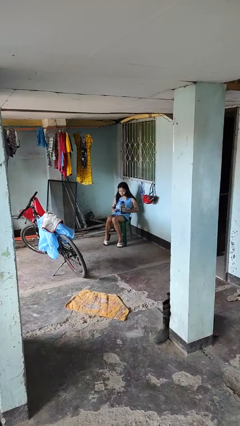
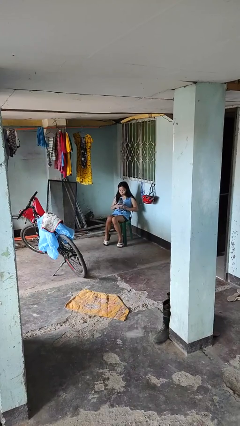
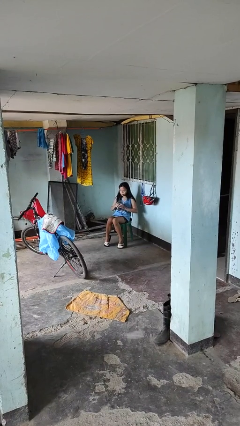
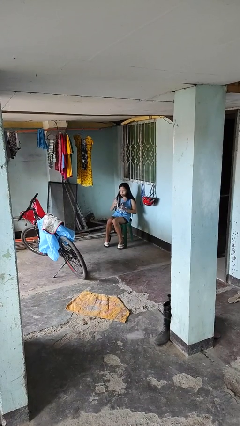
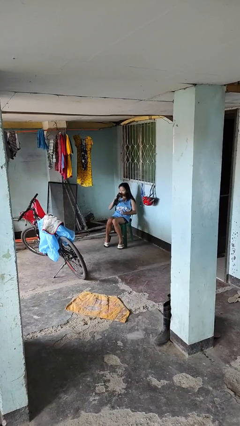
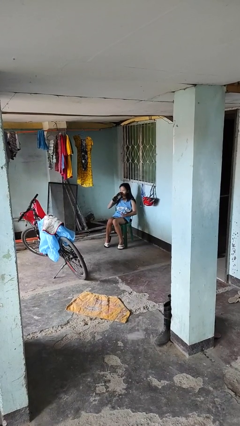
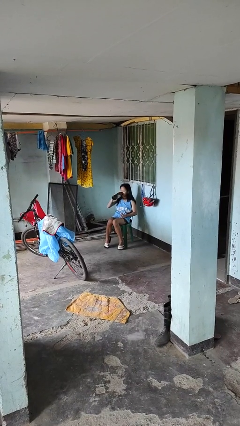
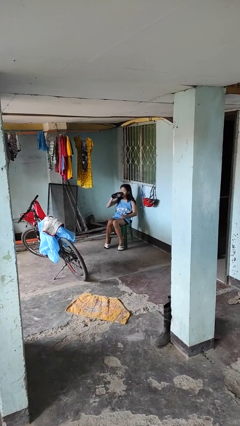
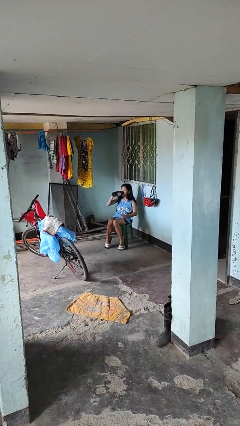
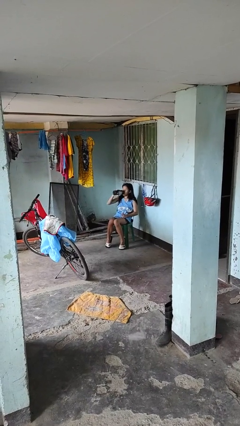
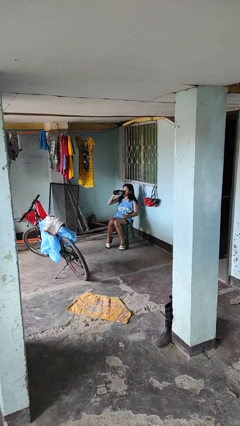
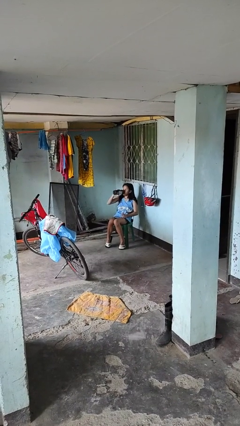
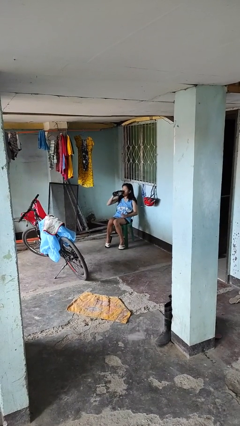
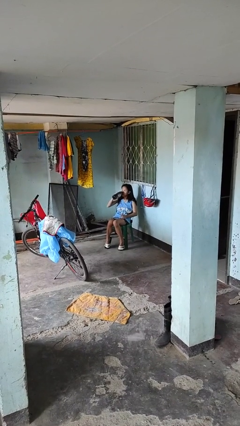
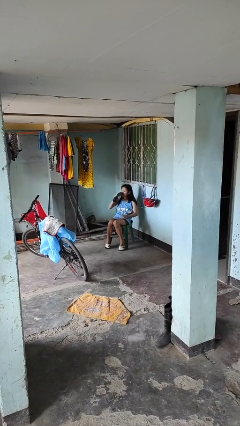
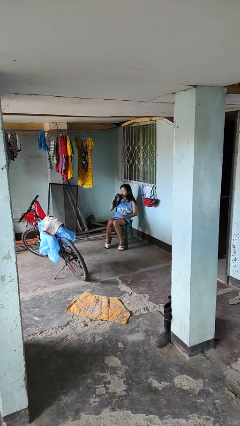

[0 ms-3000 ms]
person drinks from bottle

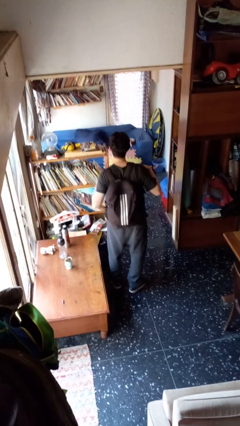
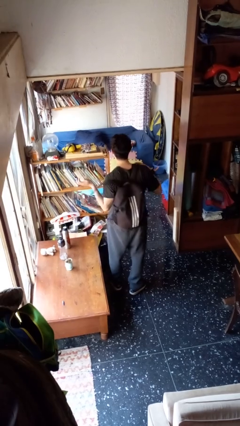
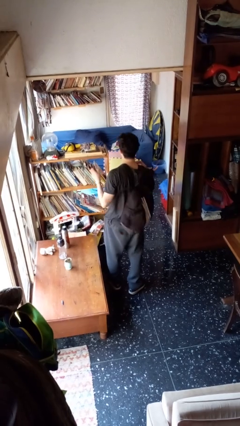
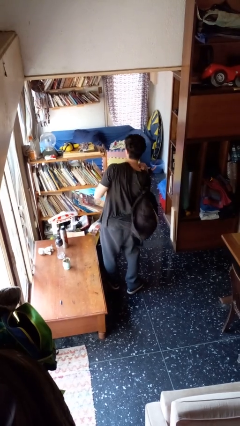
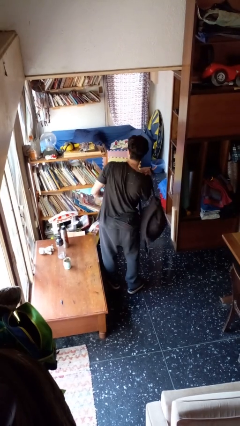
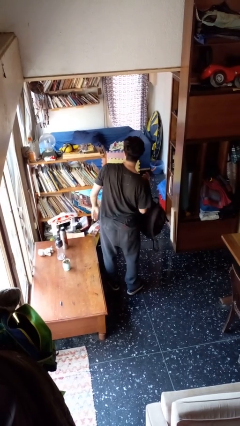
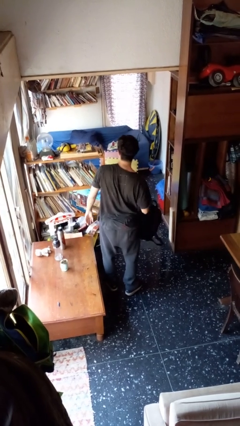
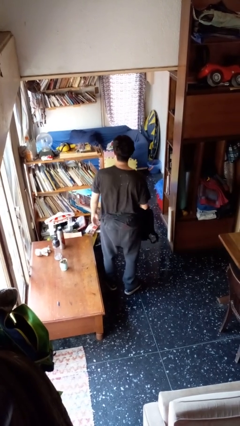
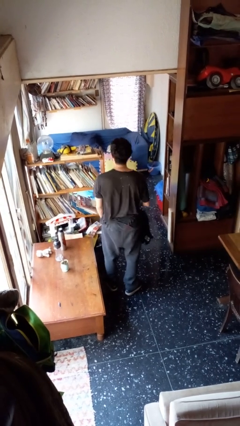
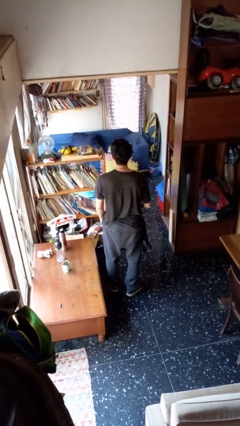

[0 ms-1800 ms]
person takes off backpack

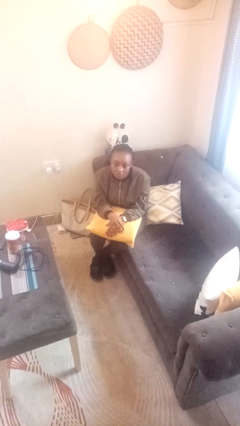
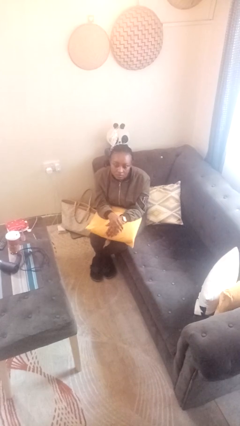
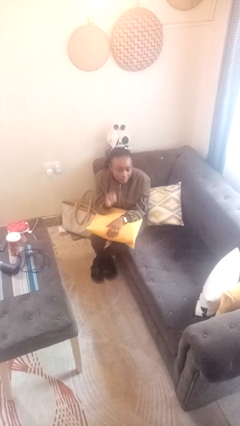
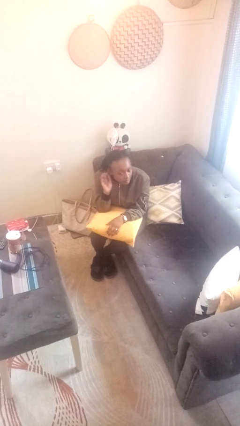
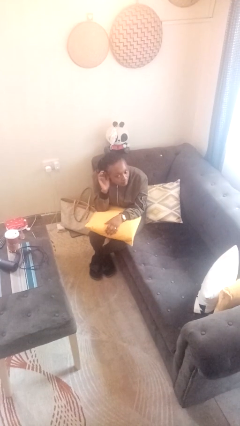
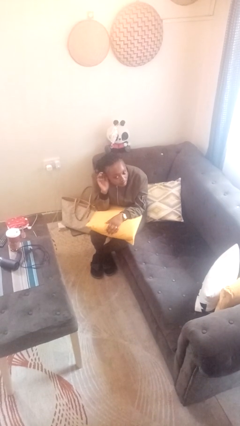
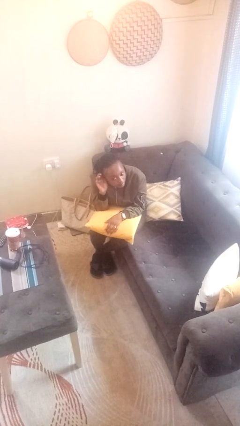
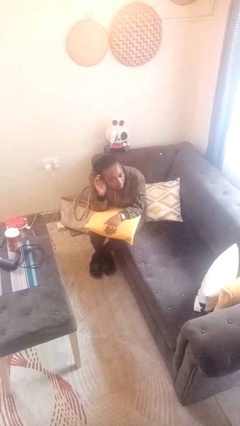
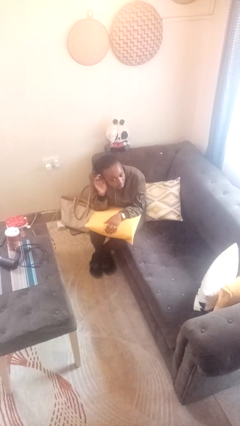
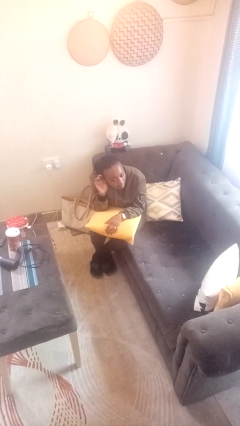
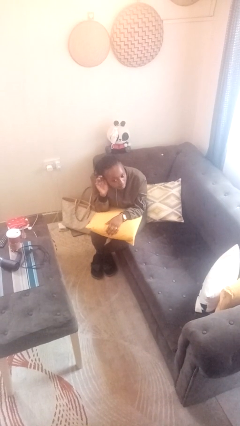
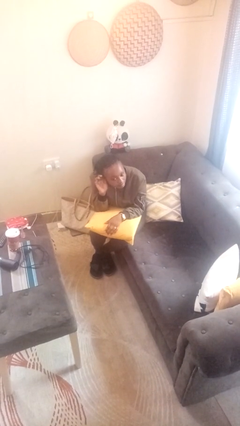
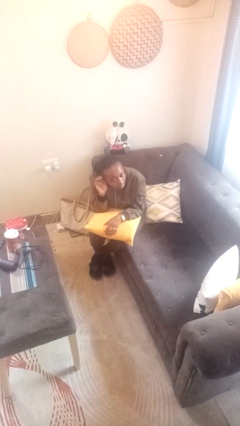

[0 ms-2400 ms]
person gestures listen closely

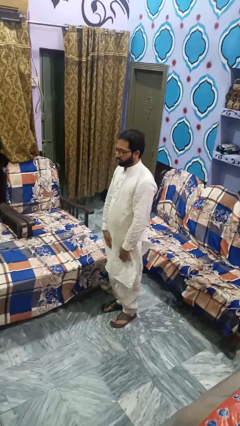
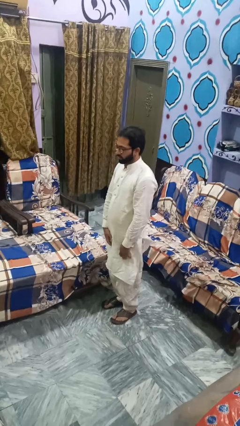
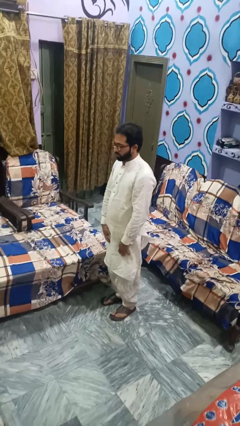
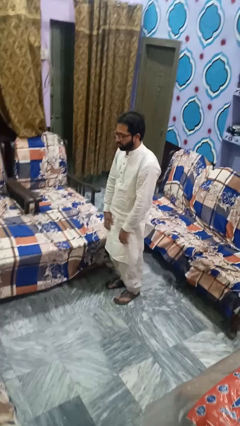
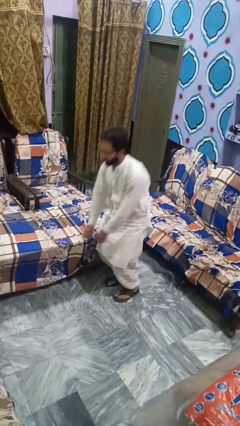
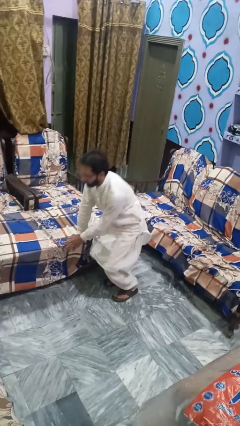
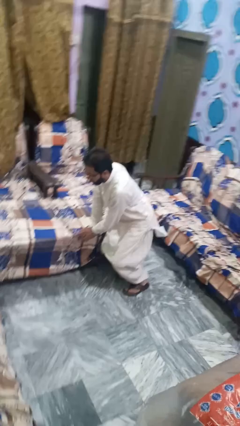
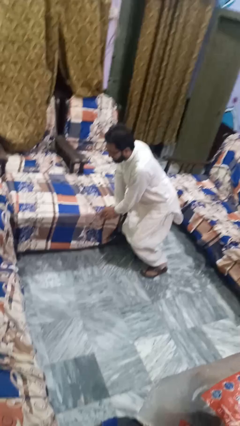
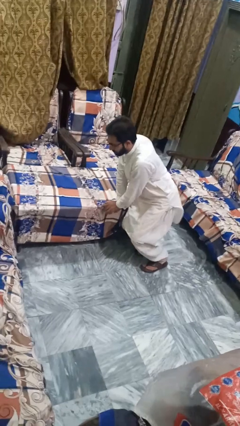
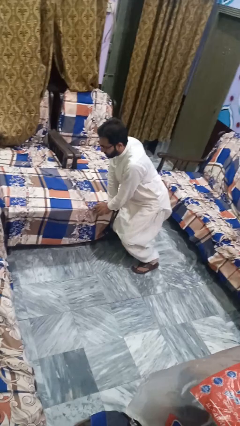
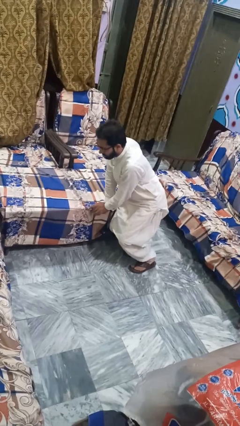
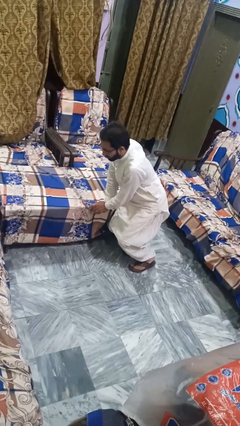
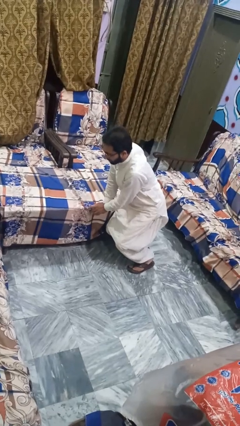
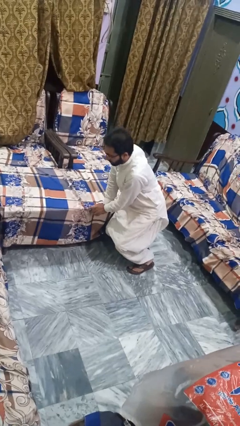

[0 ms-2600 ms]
person trips on object on floor

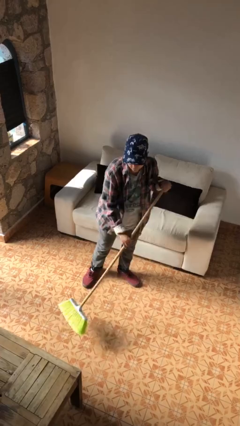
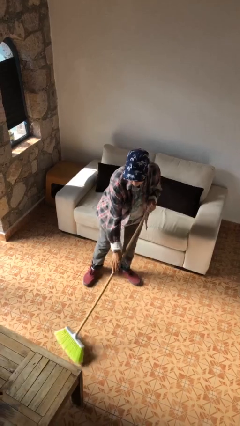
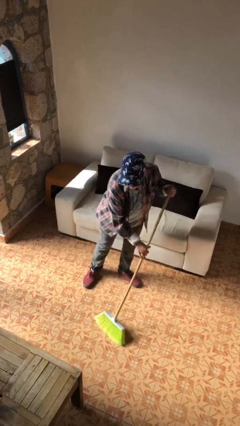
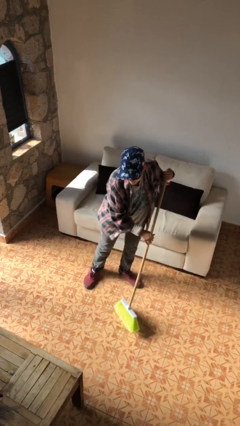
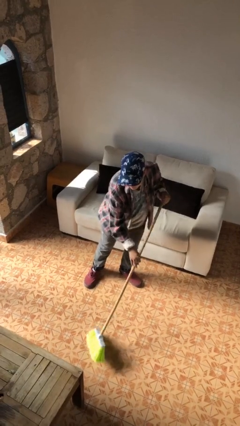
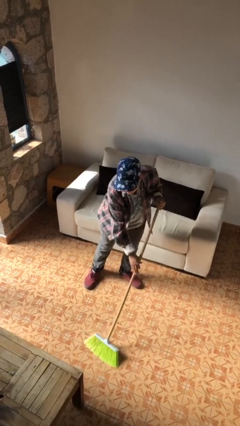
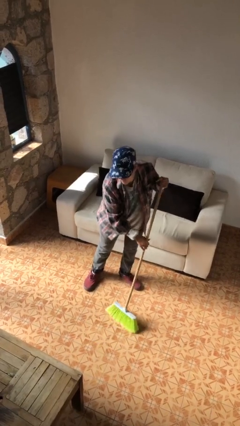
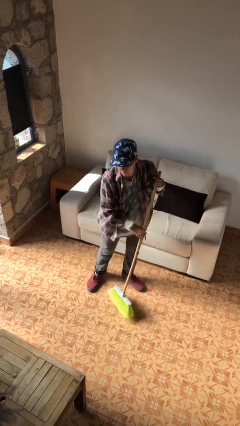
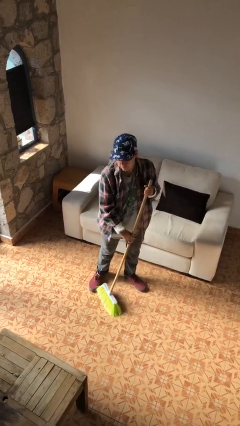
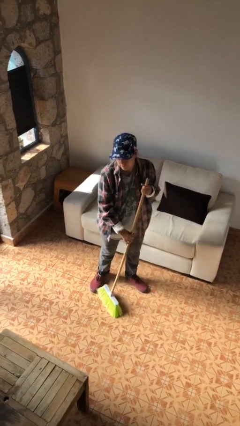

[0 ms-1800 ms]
person sweeps floor

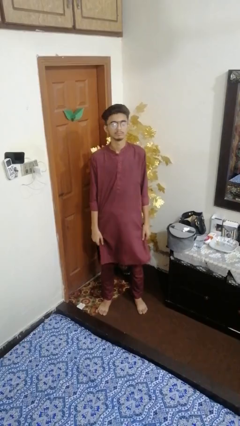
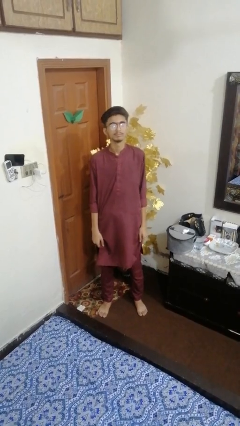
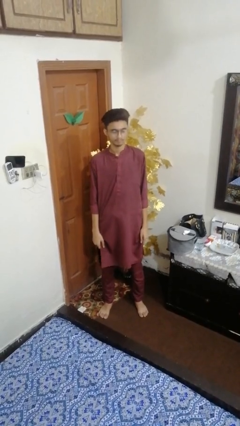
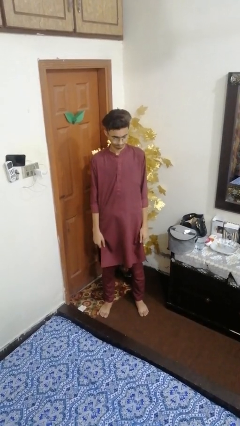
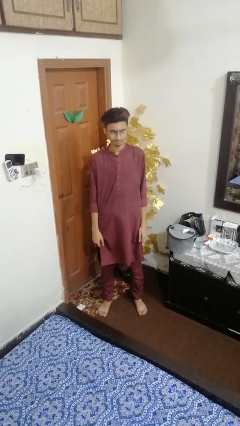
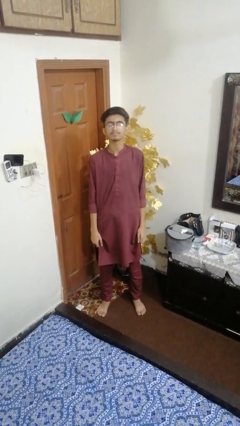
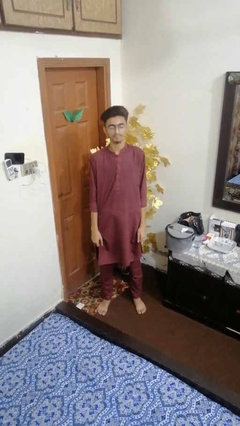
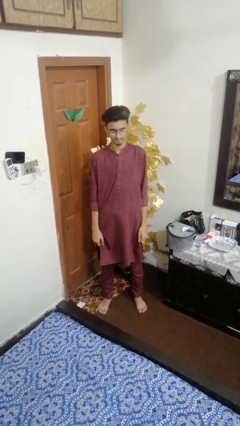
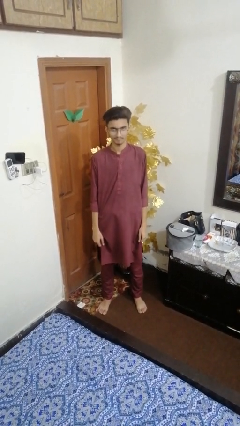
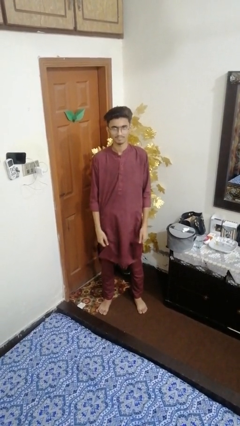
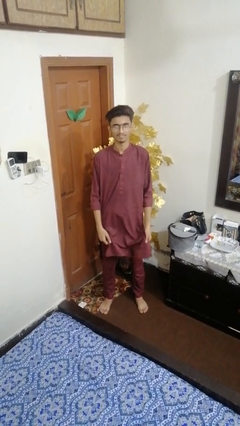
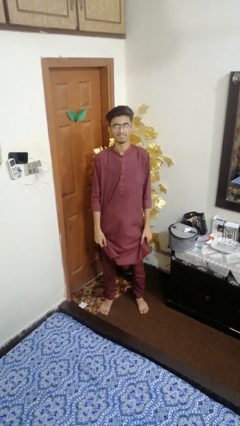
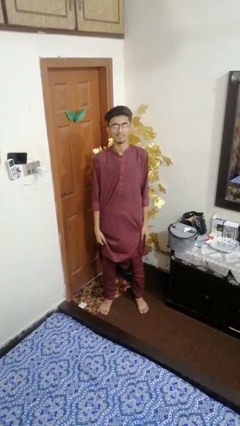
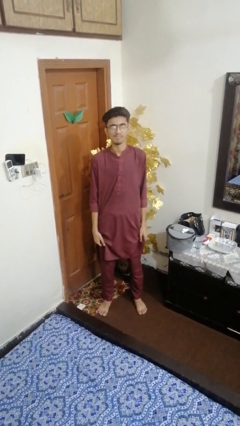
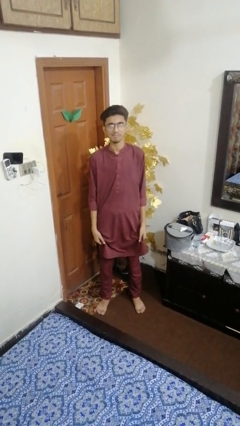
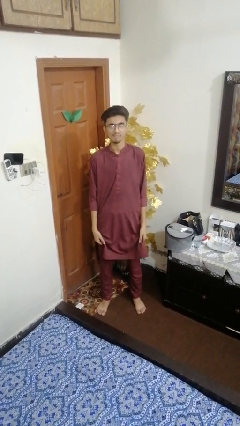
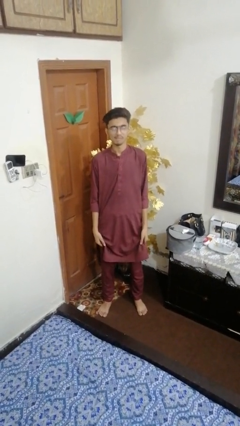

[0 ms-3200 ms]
person nods head

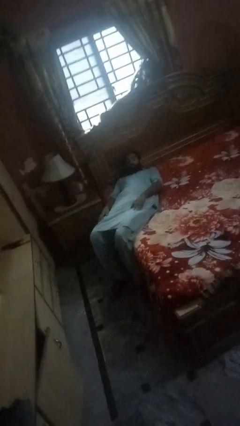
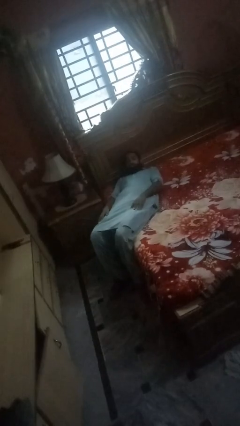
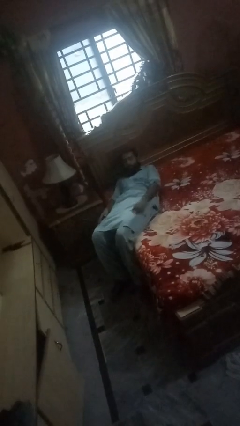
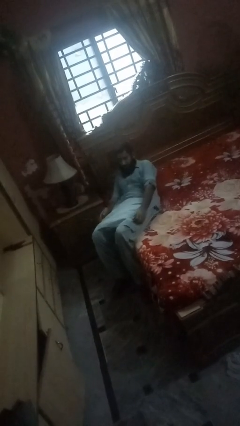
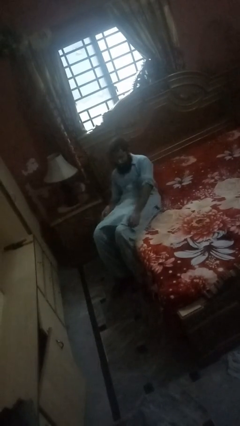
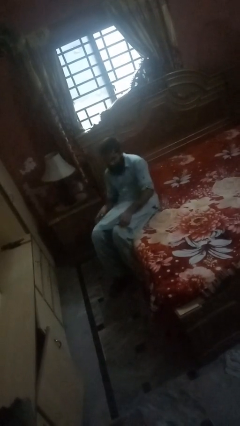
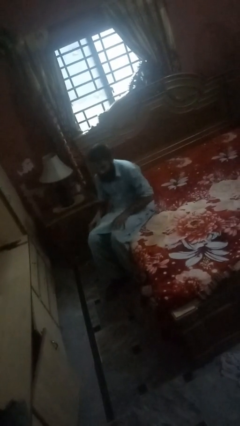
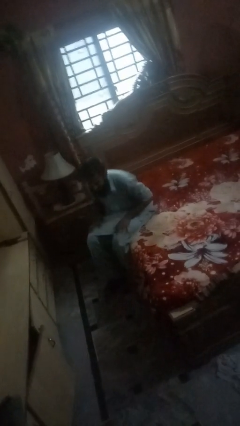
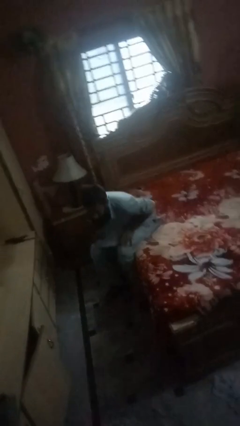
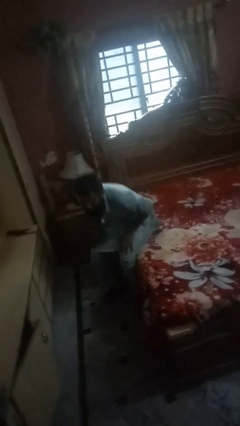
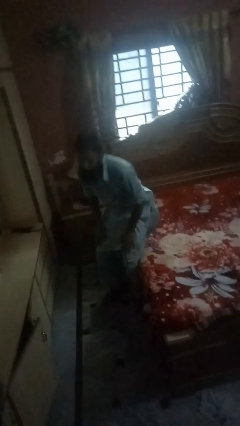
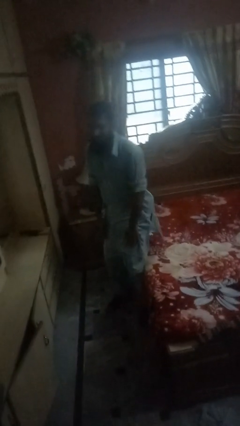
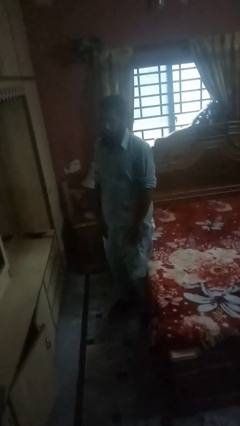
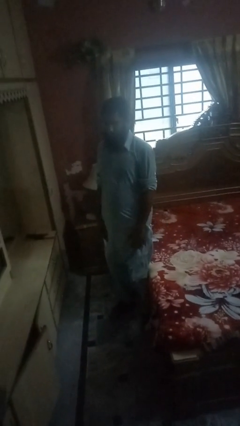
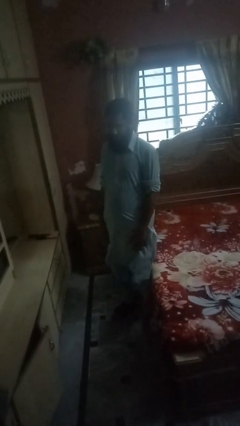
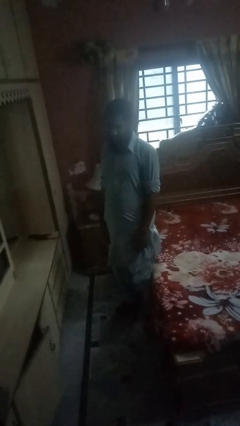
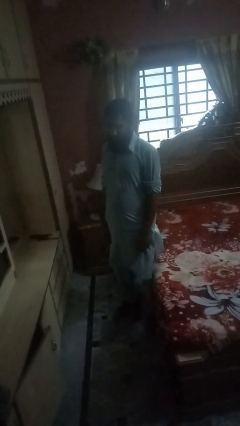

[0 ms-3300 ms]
person stands up
